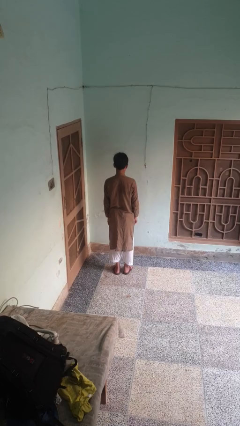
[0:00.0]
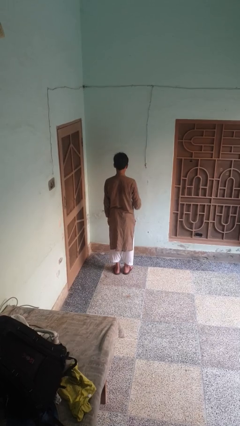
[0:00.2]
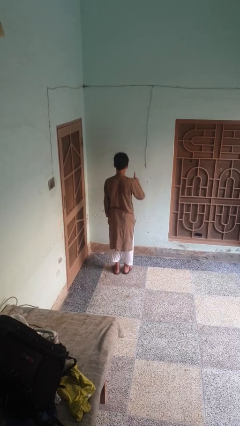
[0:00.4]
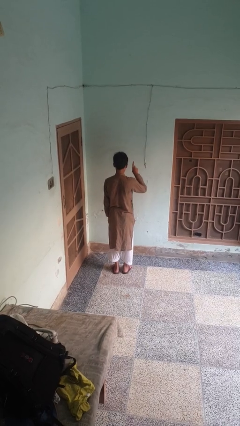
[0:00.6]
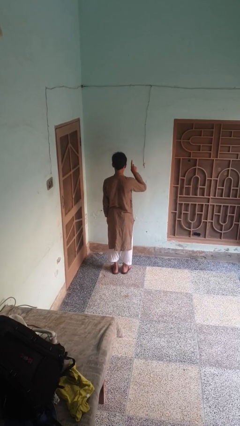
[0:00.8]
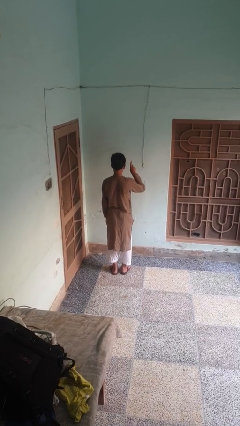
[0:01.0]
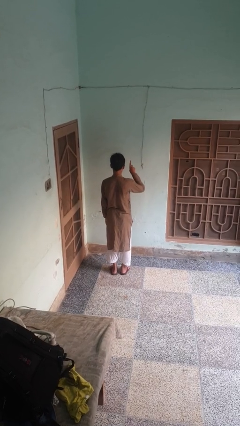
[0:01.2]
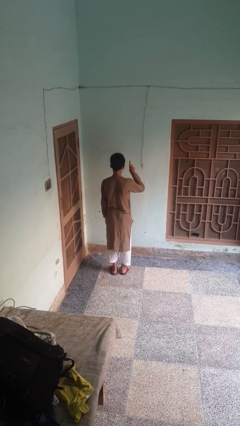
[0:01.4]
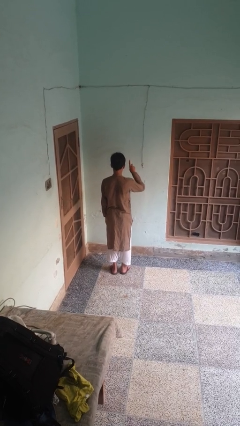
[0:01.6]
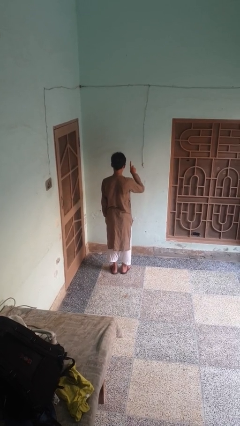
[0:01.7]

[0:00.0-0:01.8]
person gestures number one

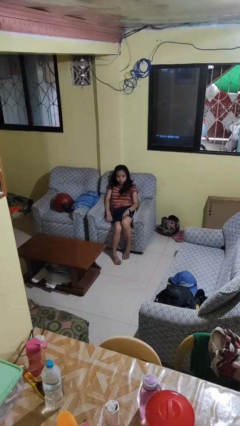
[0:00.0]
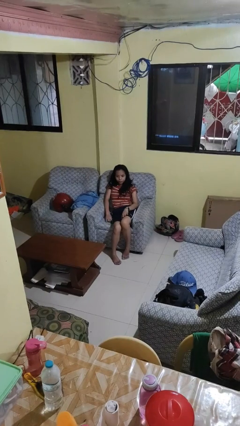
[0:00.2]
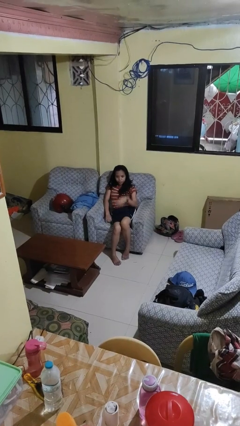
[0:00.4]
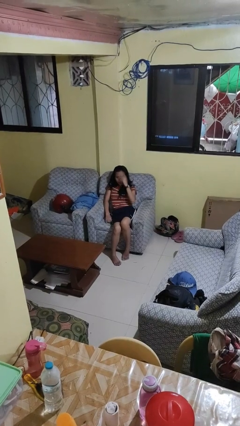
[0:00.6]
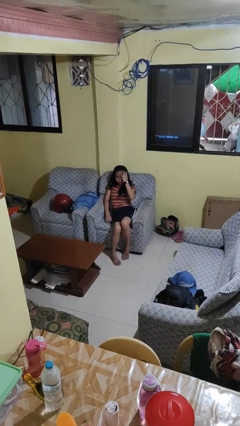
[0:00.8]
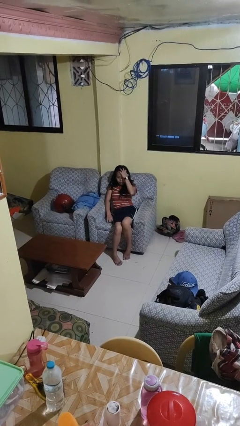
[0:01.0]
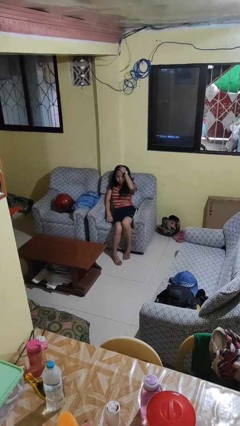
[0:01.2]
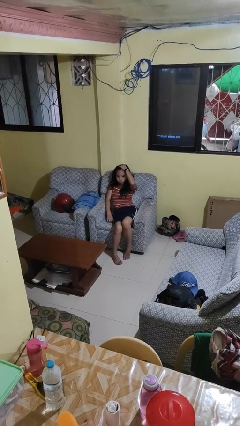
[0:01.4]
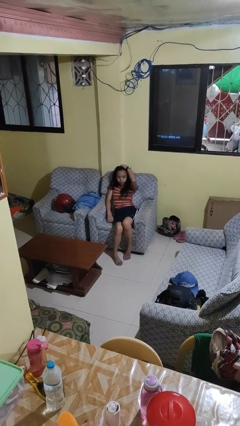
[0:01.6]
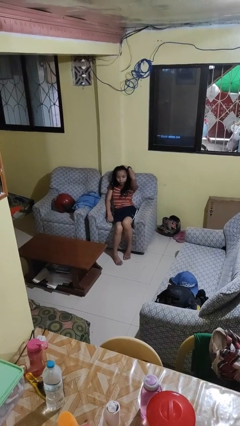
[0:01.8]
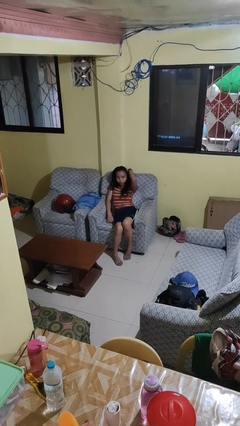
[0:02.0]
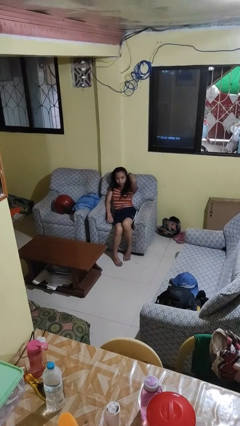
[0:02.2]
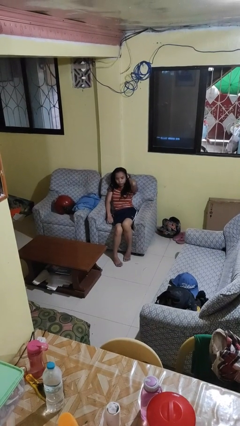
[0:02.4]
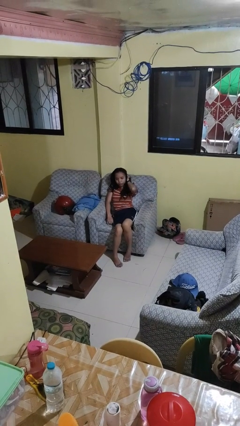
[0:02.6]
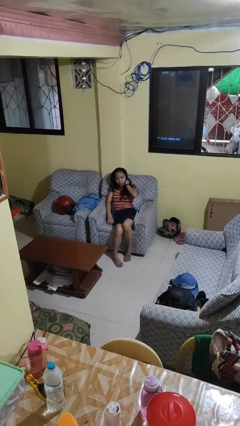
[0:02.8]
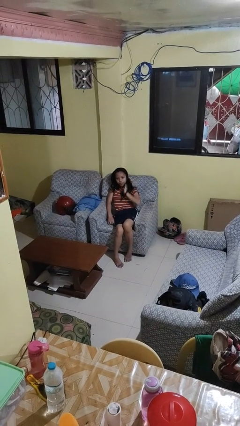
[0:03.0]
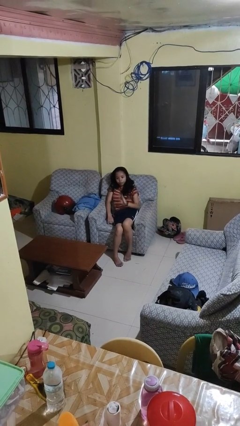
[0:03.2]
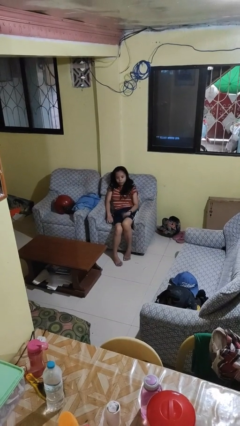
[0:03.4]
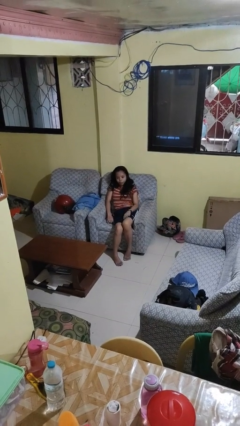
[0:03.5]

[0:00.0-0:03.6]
person strokes hair

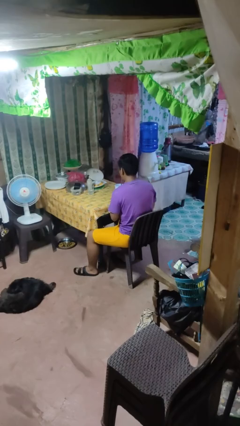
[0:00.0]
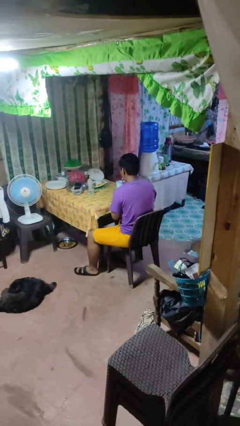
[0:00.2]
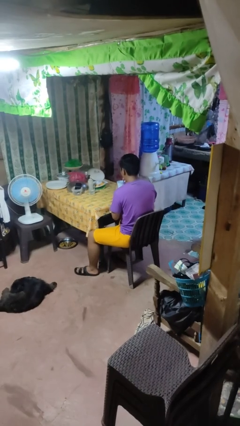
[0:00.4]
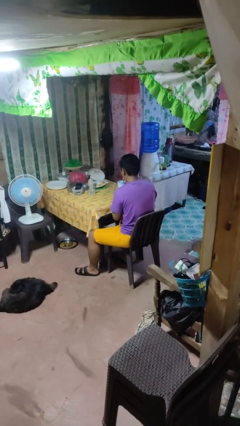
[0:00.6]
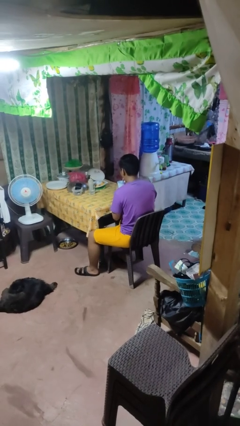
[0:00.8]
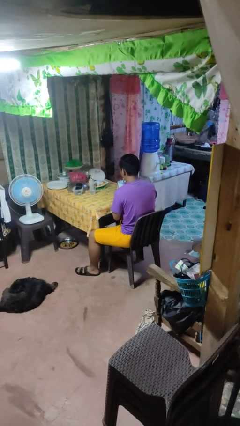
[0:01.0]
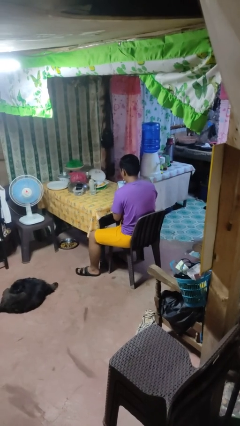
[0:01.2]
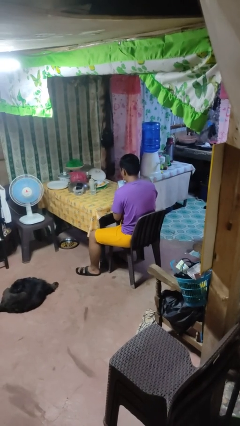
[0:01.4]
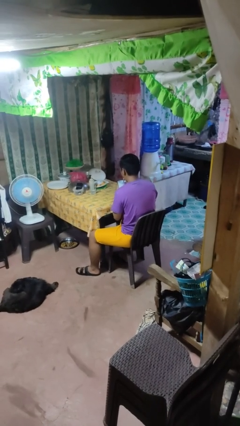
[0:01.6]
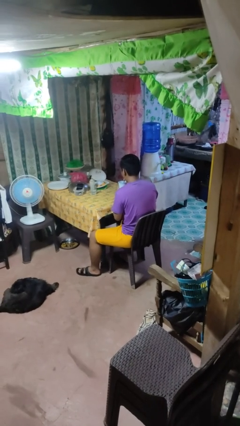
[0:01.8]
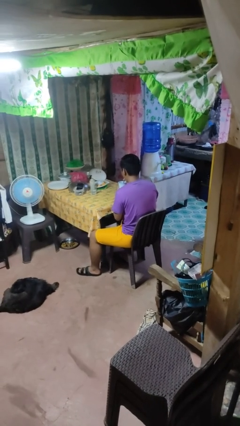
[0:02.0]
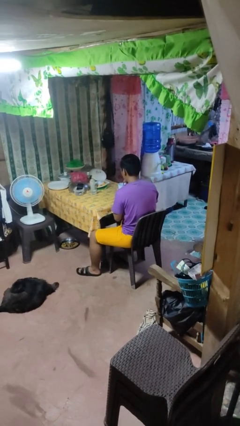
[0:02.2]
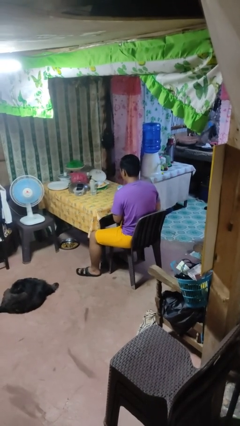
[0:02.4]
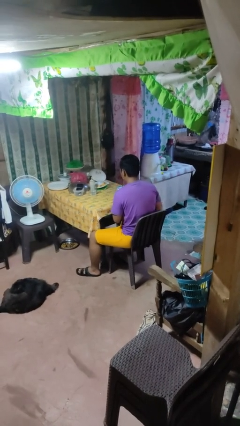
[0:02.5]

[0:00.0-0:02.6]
person drinks from straw

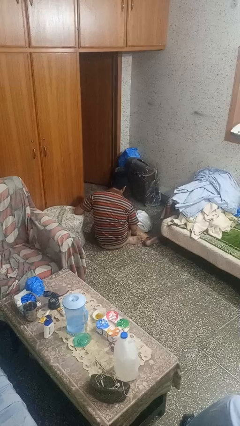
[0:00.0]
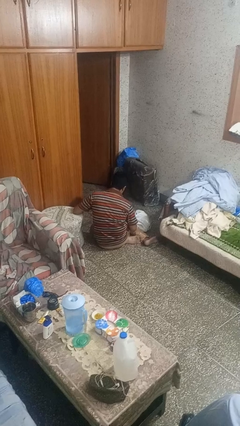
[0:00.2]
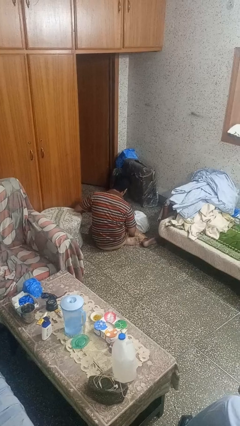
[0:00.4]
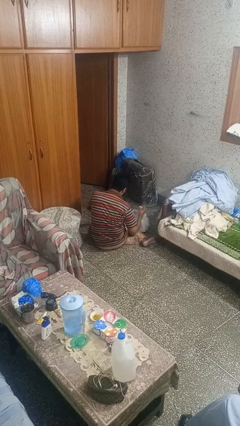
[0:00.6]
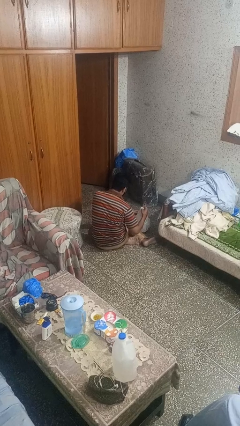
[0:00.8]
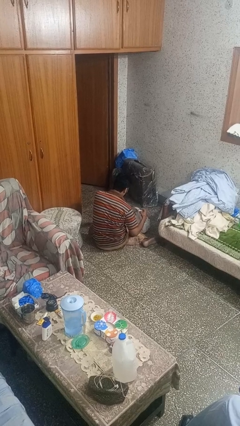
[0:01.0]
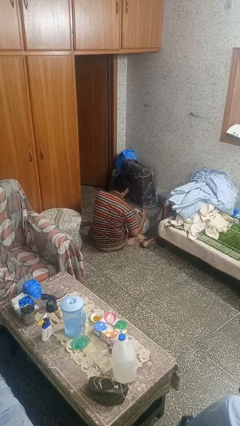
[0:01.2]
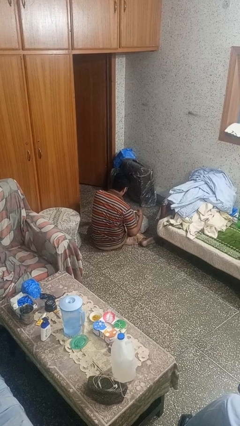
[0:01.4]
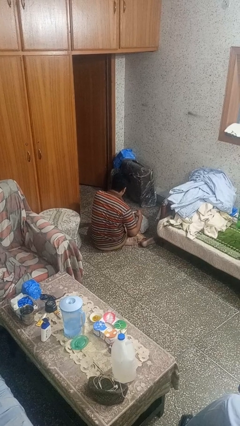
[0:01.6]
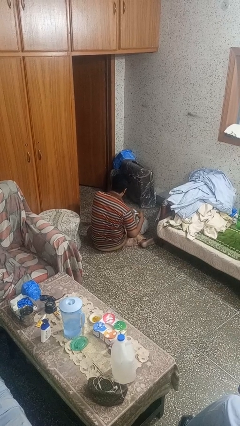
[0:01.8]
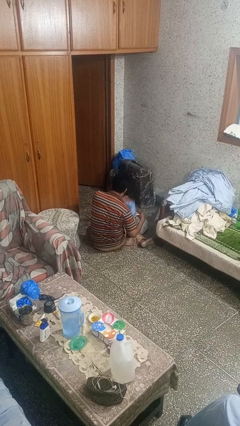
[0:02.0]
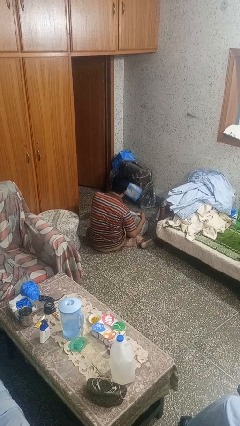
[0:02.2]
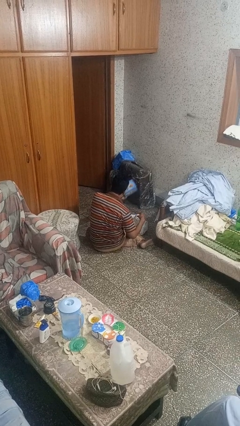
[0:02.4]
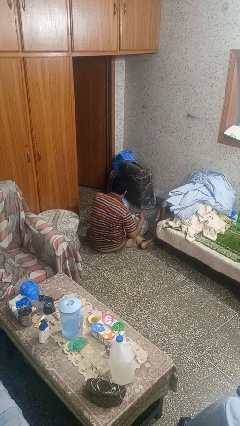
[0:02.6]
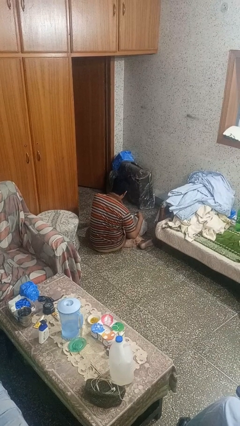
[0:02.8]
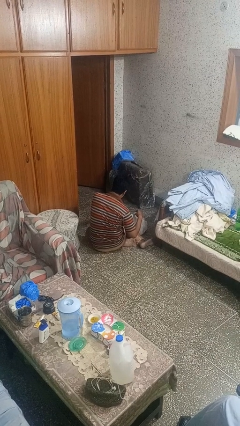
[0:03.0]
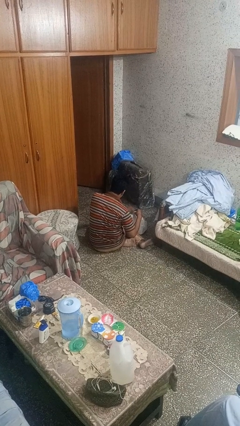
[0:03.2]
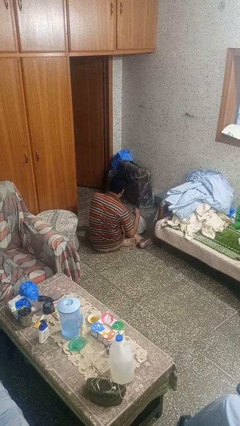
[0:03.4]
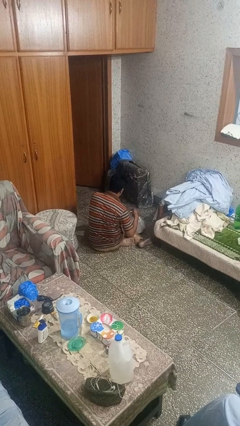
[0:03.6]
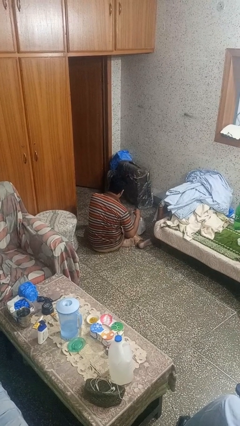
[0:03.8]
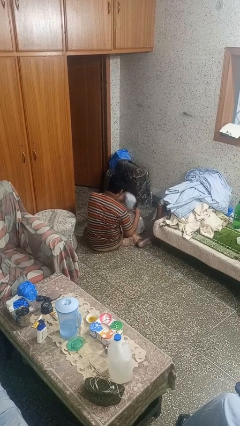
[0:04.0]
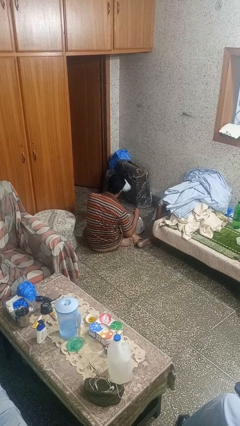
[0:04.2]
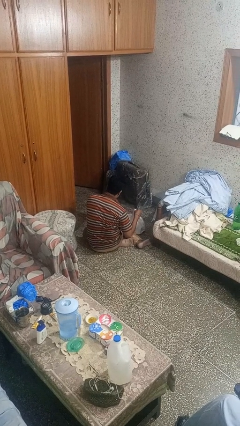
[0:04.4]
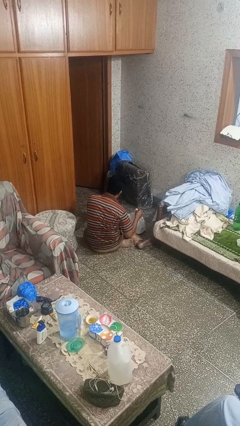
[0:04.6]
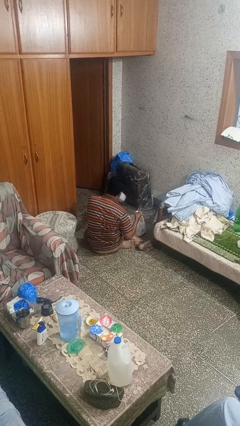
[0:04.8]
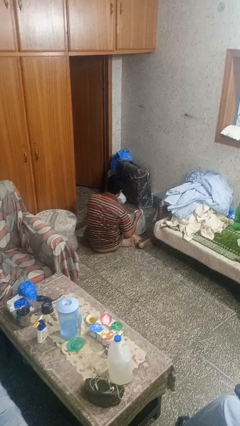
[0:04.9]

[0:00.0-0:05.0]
person takes object from bag

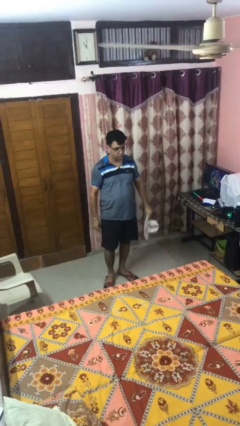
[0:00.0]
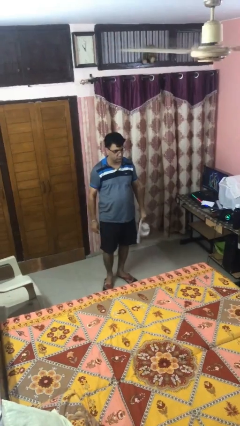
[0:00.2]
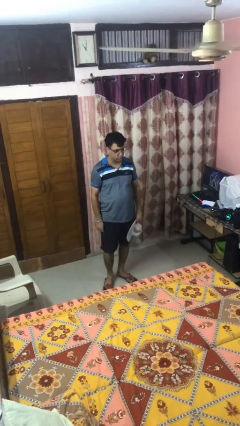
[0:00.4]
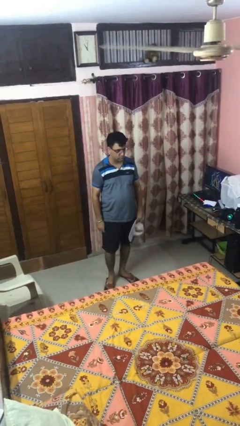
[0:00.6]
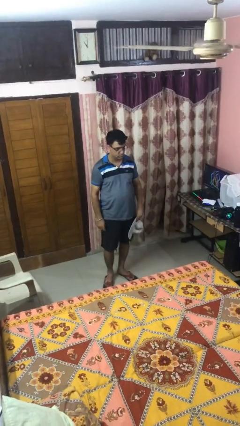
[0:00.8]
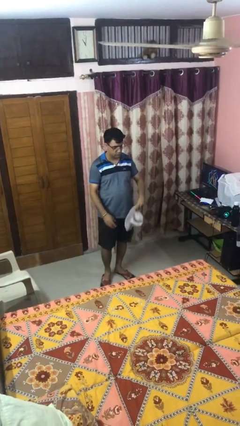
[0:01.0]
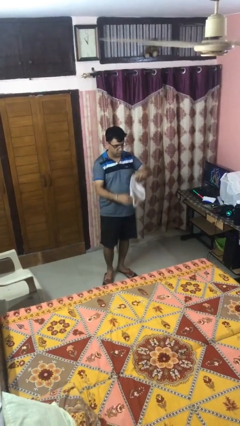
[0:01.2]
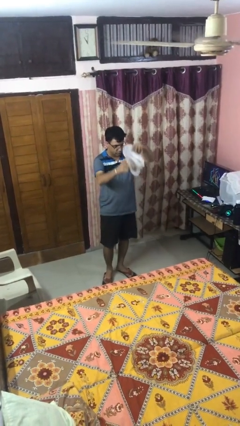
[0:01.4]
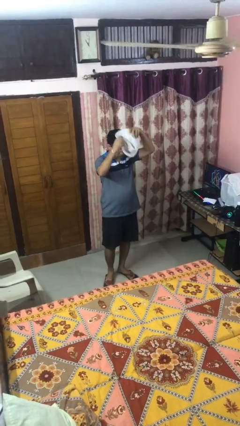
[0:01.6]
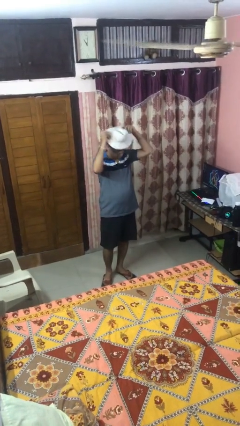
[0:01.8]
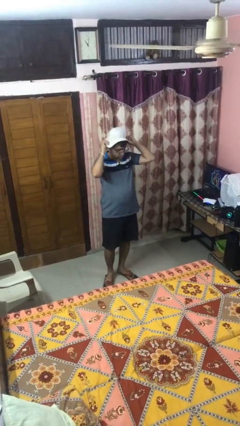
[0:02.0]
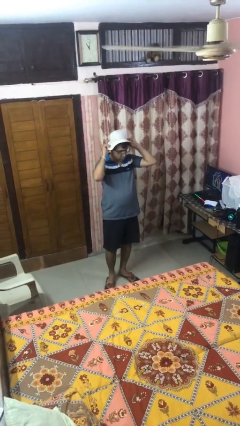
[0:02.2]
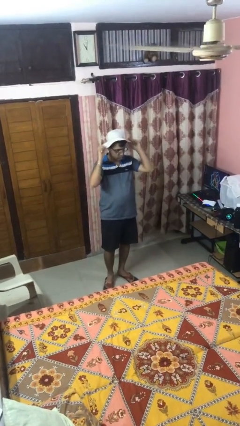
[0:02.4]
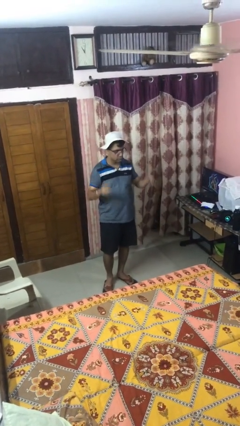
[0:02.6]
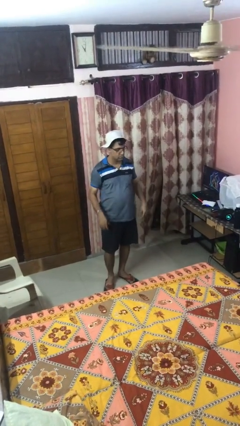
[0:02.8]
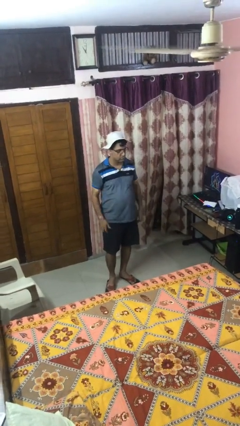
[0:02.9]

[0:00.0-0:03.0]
person puts on hat

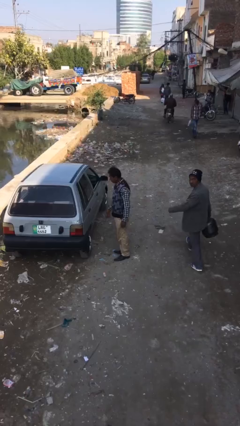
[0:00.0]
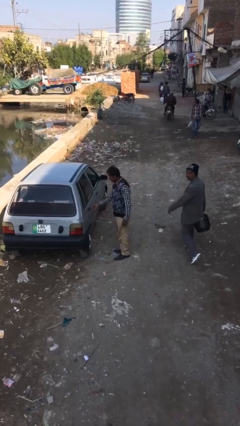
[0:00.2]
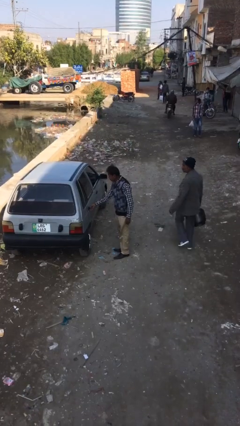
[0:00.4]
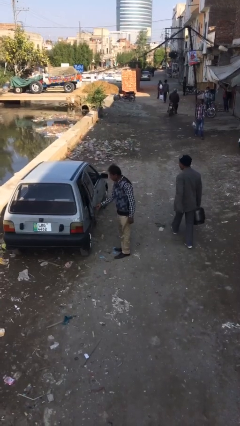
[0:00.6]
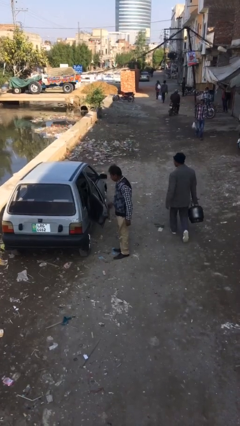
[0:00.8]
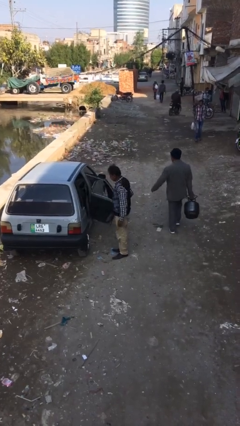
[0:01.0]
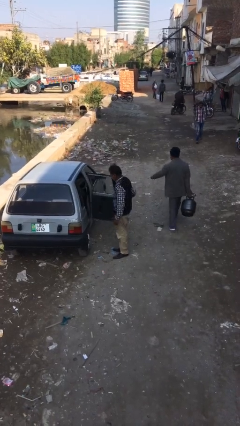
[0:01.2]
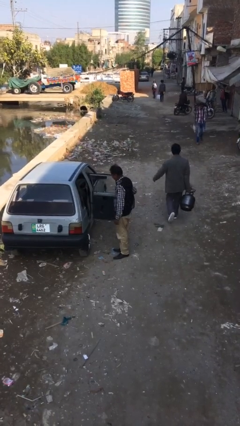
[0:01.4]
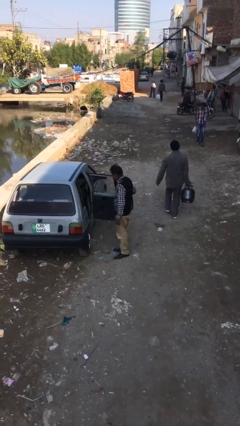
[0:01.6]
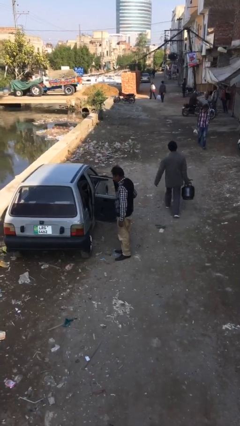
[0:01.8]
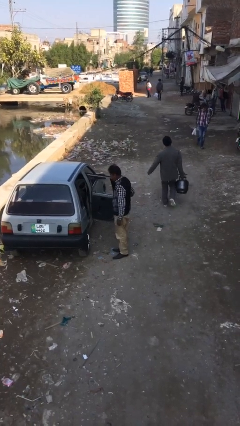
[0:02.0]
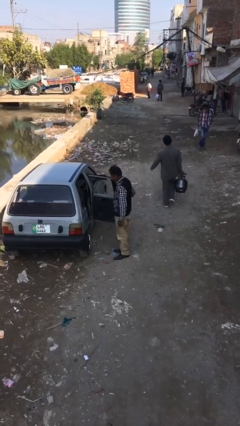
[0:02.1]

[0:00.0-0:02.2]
person opens car door
